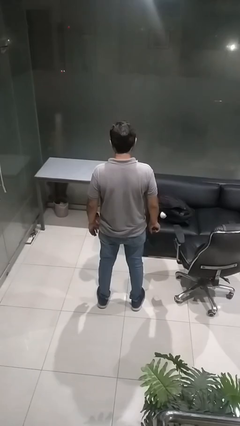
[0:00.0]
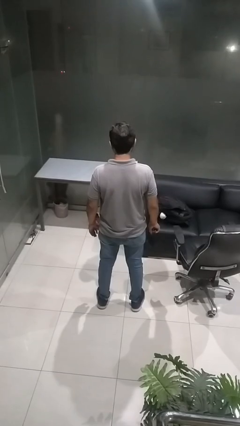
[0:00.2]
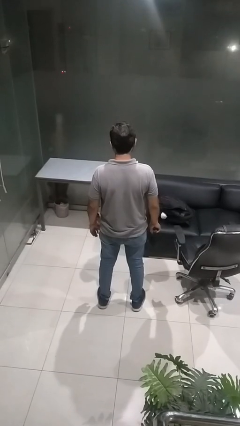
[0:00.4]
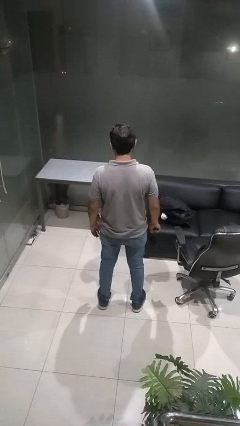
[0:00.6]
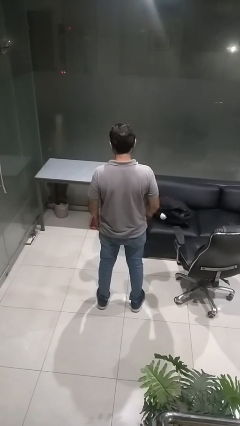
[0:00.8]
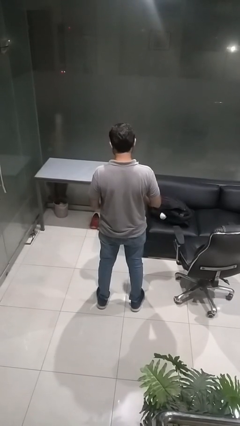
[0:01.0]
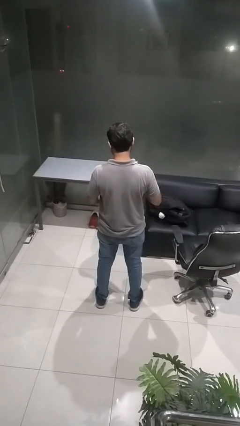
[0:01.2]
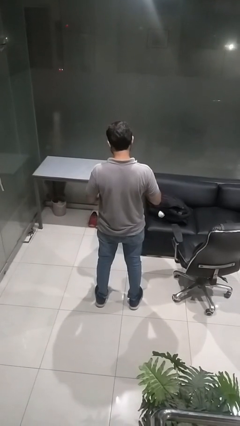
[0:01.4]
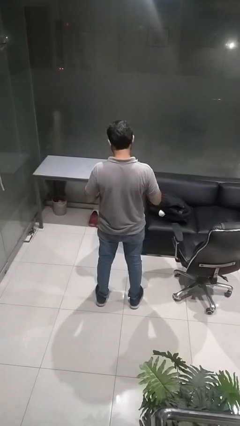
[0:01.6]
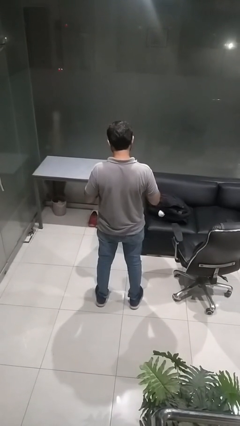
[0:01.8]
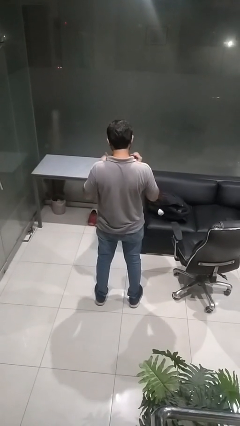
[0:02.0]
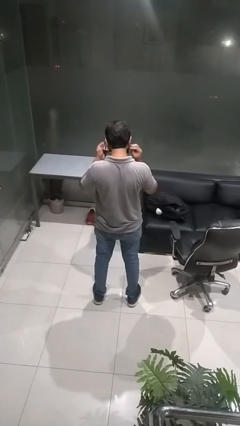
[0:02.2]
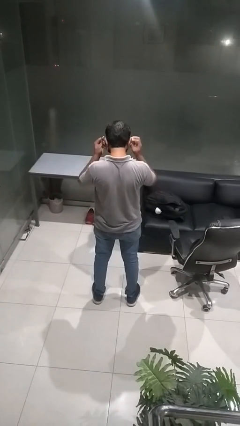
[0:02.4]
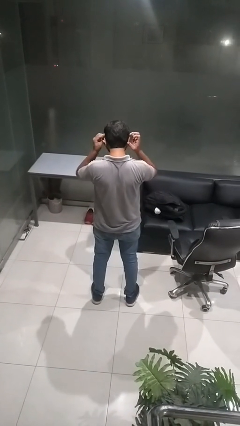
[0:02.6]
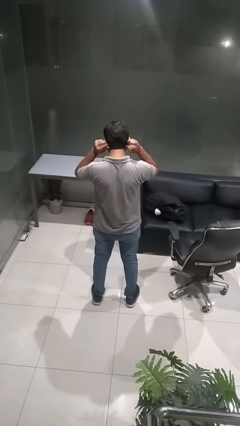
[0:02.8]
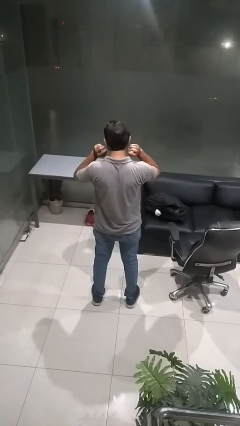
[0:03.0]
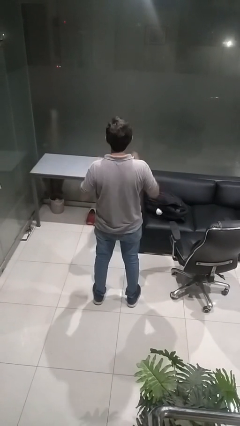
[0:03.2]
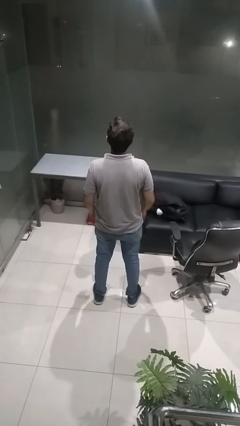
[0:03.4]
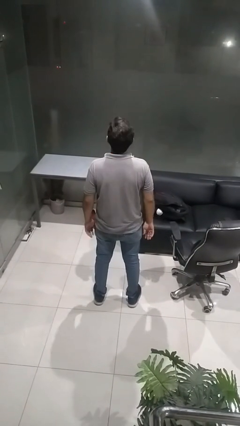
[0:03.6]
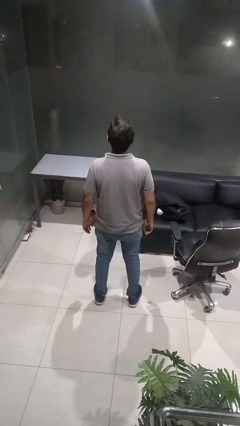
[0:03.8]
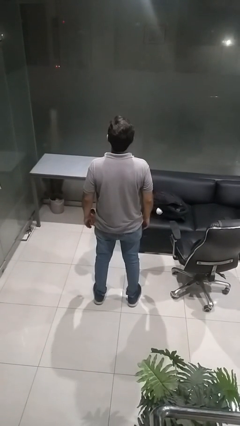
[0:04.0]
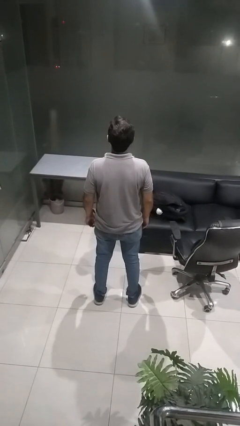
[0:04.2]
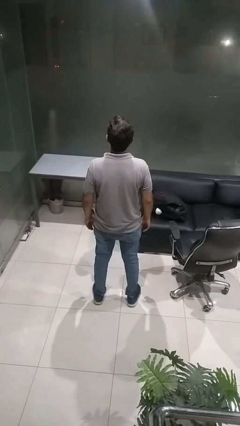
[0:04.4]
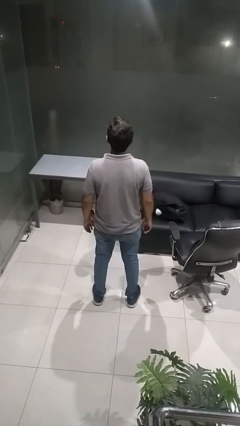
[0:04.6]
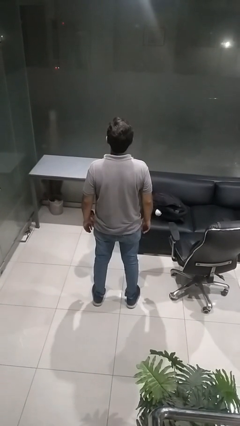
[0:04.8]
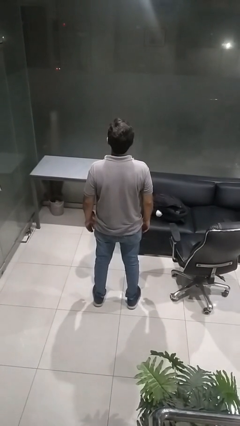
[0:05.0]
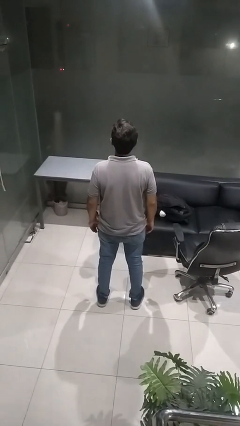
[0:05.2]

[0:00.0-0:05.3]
person puts on facemask

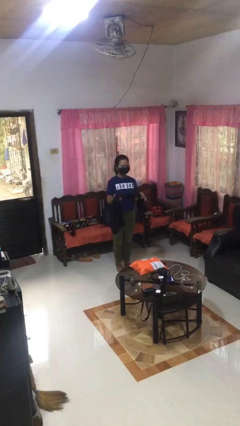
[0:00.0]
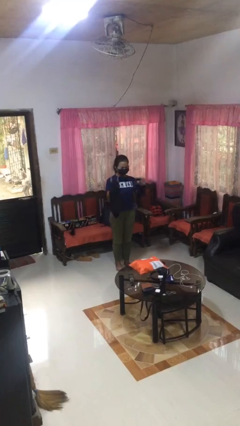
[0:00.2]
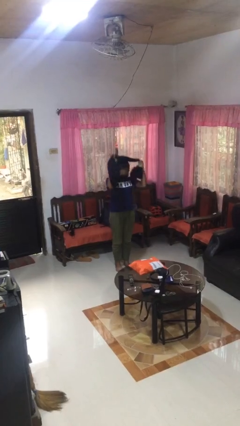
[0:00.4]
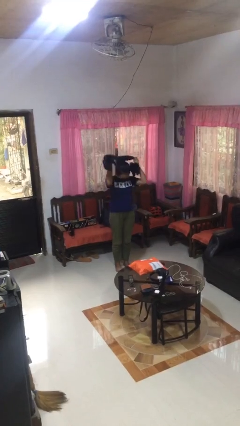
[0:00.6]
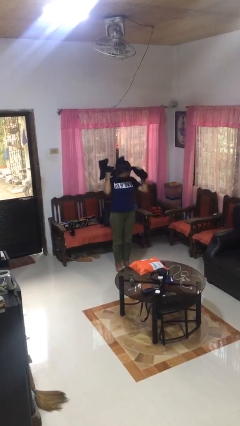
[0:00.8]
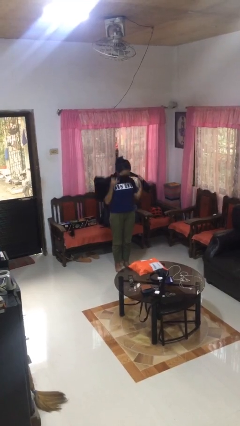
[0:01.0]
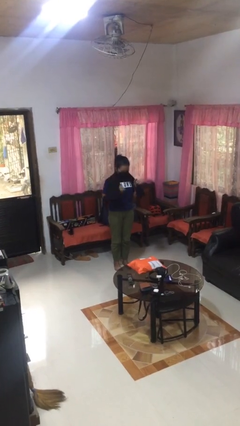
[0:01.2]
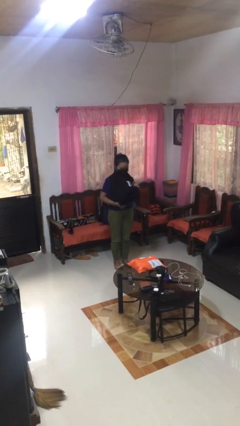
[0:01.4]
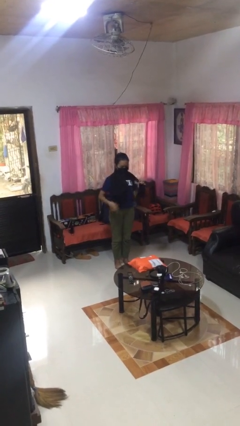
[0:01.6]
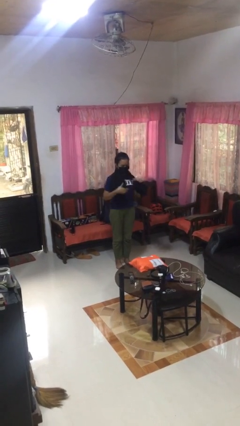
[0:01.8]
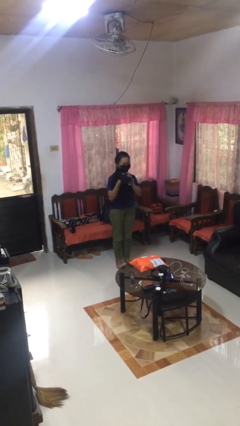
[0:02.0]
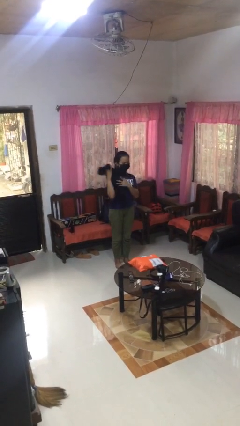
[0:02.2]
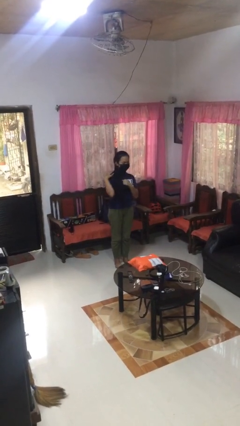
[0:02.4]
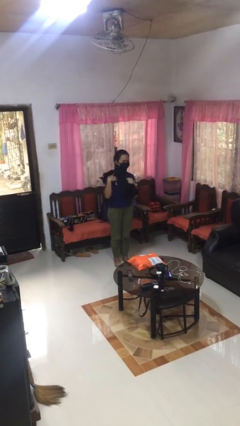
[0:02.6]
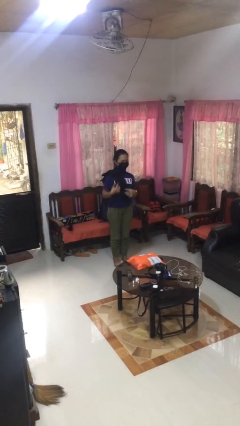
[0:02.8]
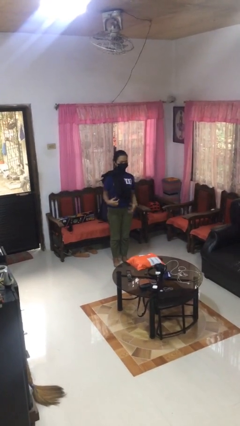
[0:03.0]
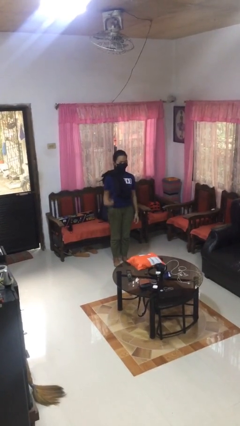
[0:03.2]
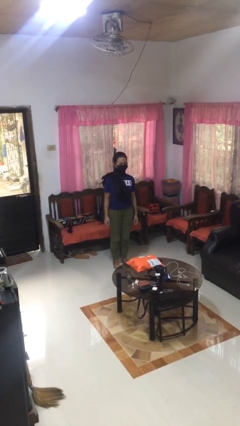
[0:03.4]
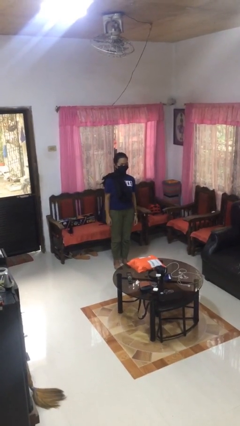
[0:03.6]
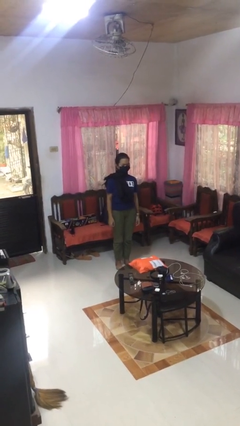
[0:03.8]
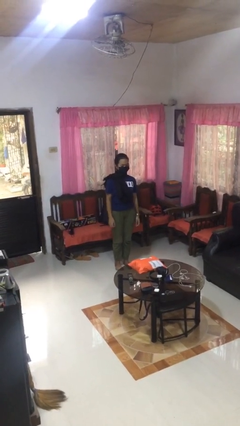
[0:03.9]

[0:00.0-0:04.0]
person puts on scarf

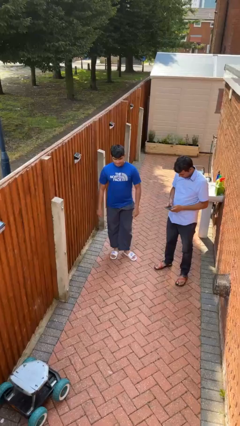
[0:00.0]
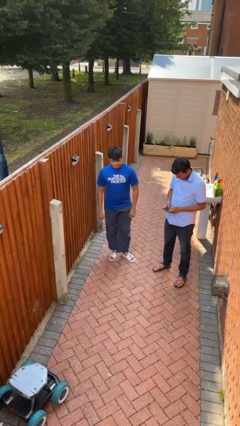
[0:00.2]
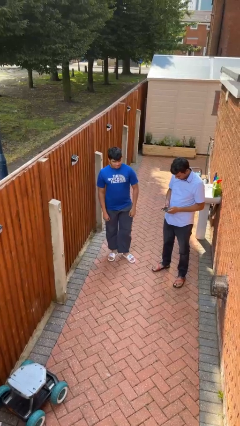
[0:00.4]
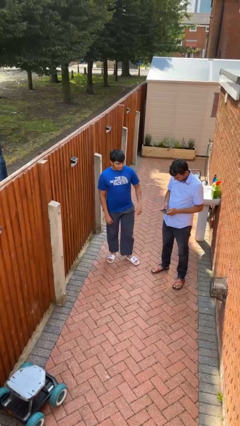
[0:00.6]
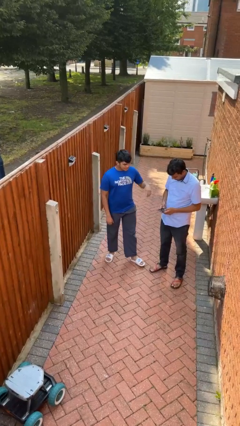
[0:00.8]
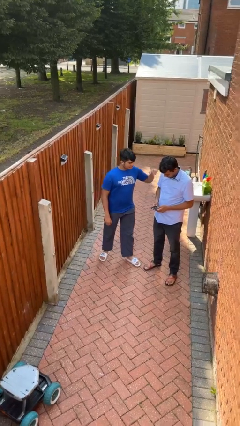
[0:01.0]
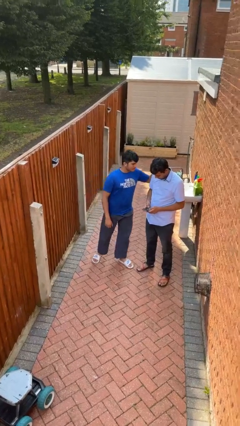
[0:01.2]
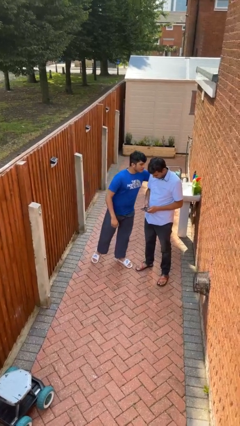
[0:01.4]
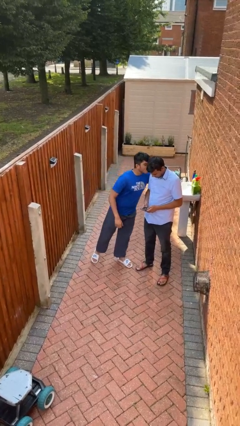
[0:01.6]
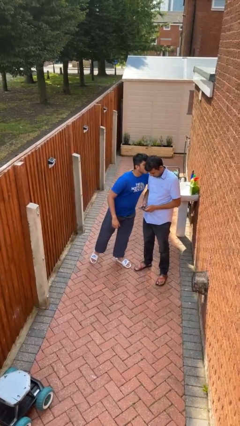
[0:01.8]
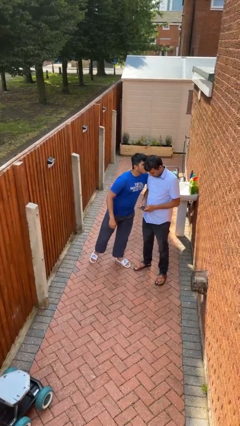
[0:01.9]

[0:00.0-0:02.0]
person kisses cheek of person

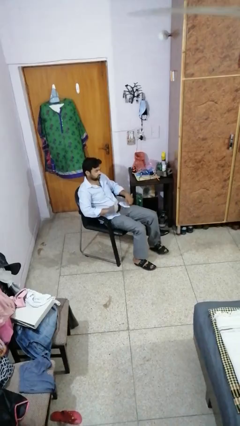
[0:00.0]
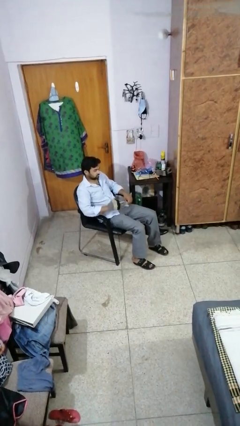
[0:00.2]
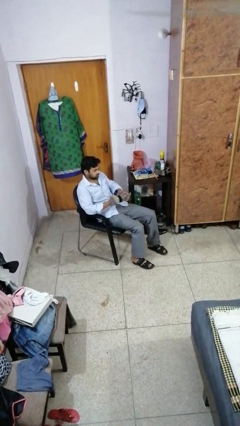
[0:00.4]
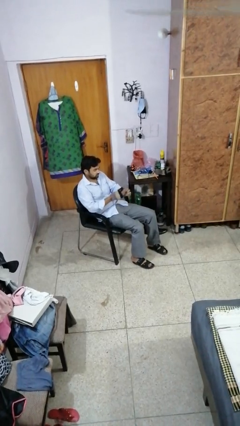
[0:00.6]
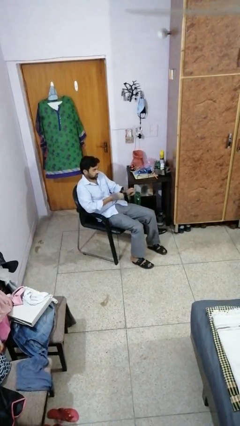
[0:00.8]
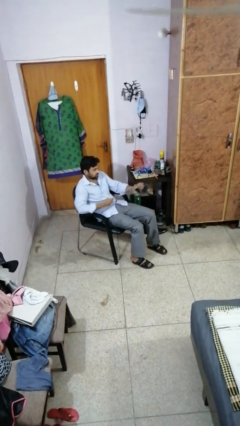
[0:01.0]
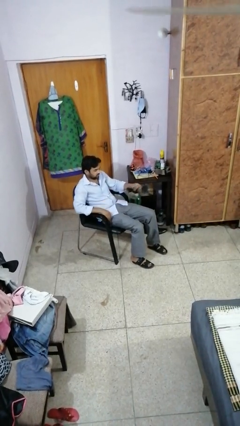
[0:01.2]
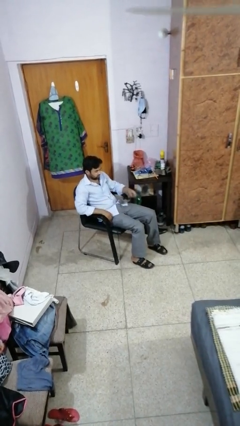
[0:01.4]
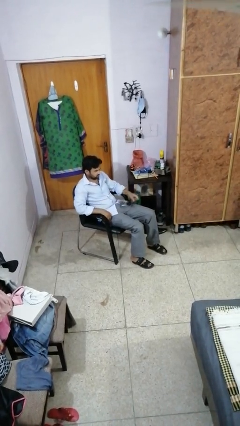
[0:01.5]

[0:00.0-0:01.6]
person takes off gloves

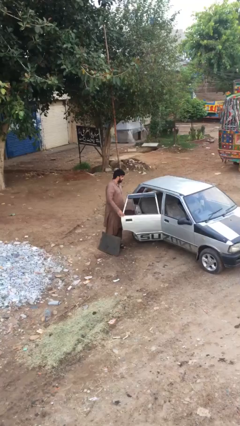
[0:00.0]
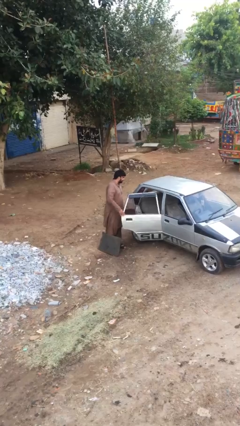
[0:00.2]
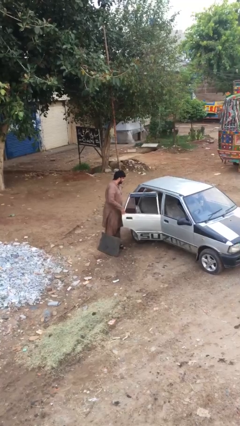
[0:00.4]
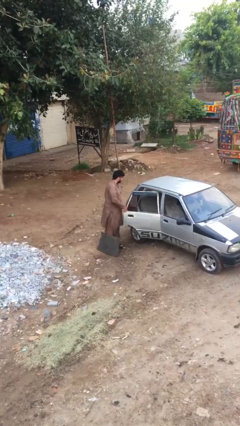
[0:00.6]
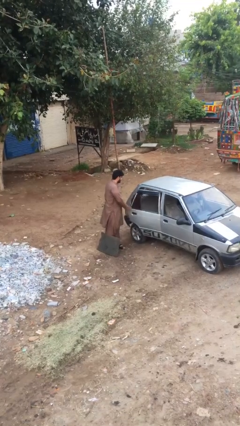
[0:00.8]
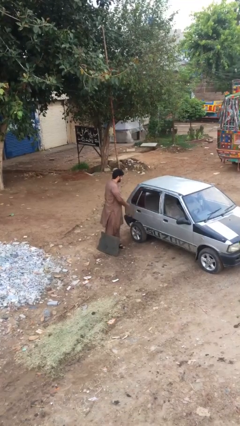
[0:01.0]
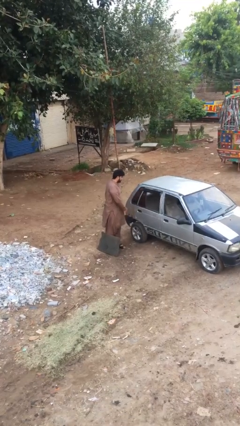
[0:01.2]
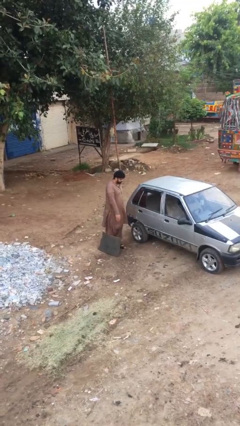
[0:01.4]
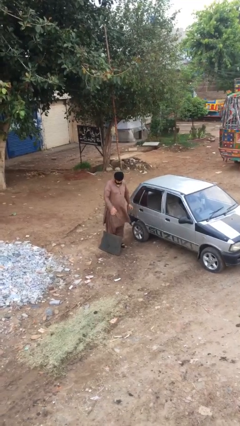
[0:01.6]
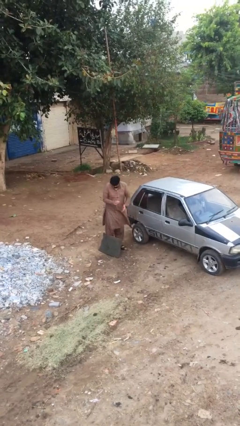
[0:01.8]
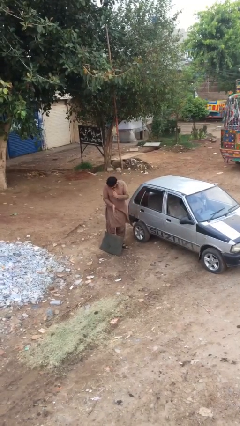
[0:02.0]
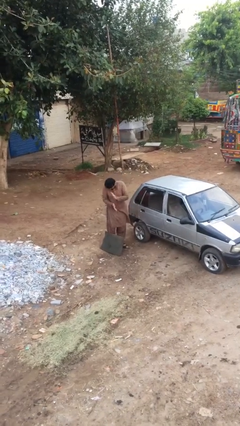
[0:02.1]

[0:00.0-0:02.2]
person closes car door

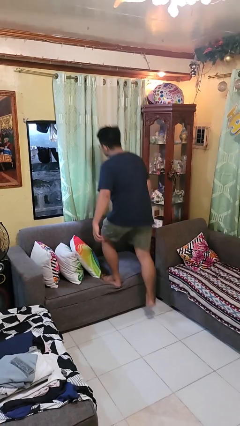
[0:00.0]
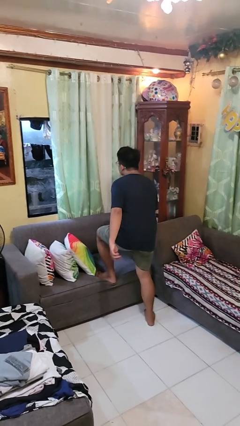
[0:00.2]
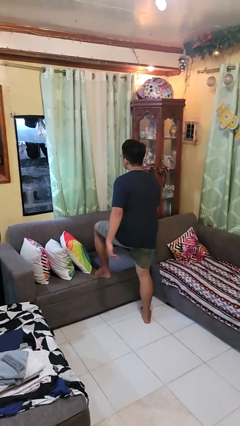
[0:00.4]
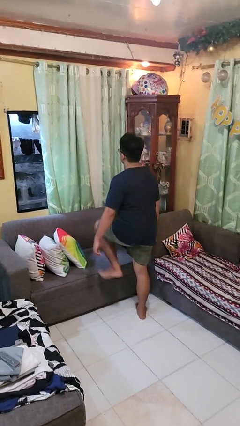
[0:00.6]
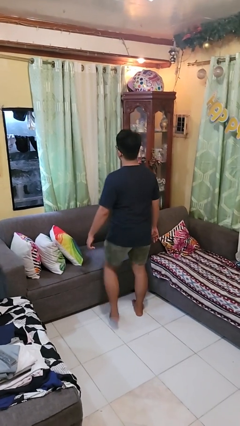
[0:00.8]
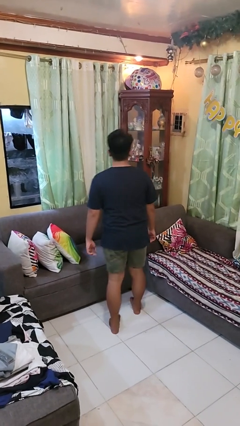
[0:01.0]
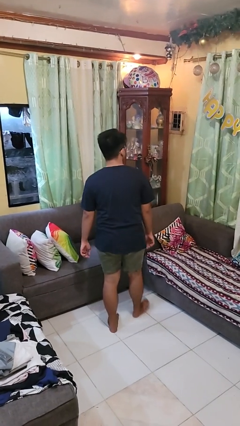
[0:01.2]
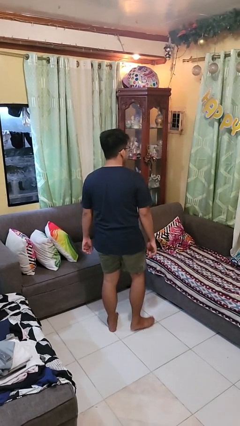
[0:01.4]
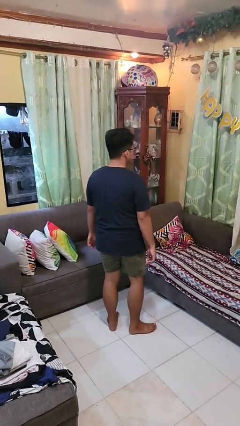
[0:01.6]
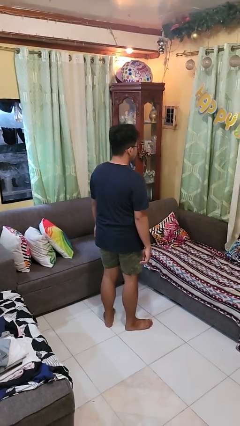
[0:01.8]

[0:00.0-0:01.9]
person climbs off couch

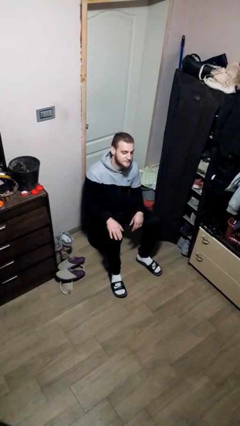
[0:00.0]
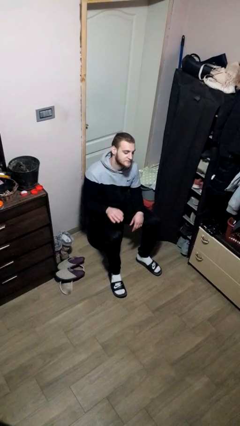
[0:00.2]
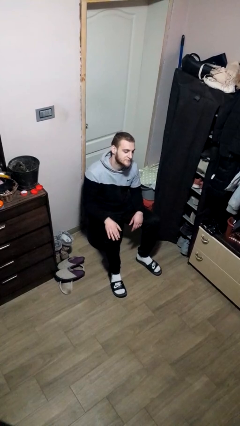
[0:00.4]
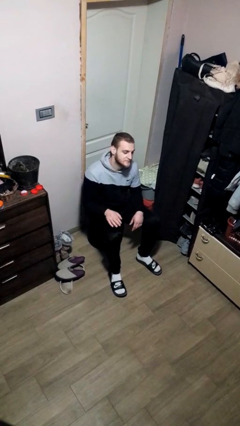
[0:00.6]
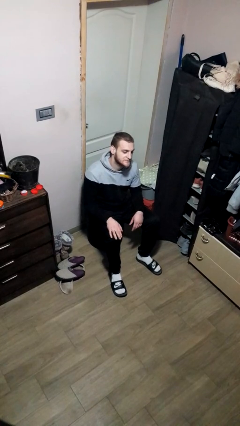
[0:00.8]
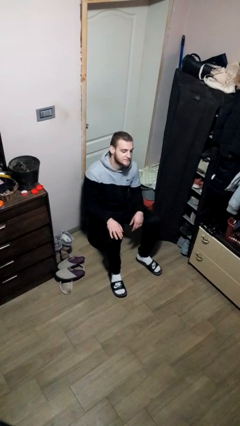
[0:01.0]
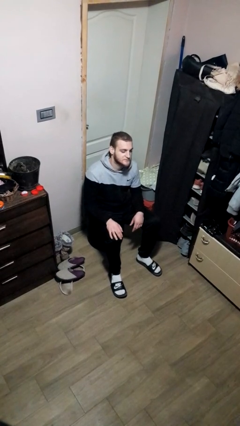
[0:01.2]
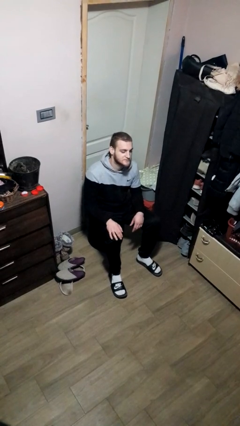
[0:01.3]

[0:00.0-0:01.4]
person slaps hands on thighs
